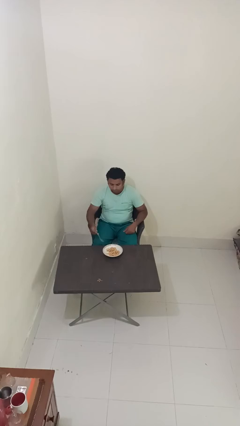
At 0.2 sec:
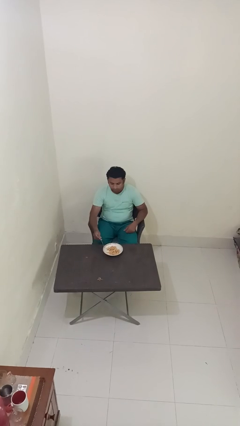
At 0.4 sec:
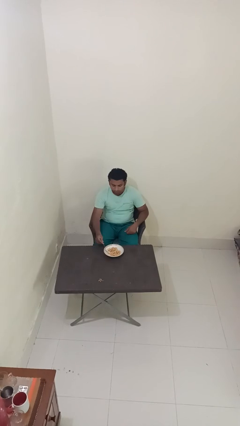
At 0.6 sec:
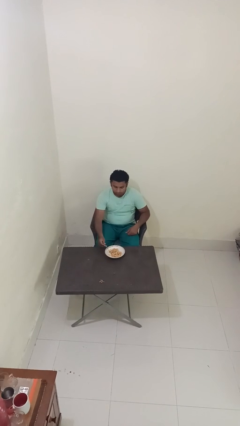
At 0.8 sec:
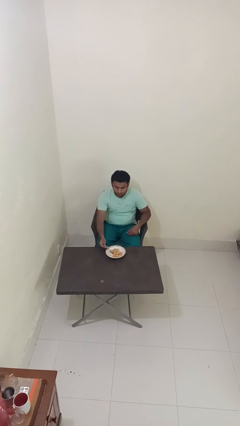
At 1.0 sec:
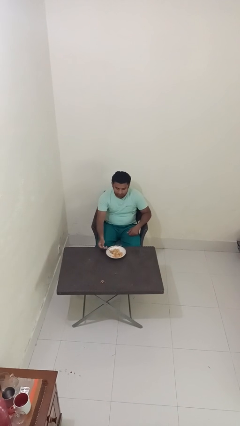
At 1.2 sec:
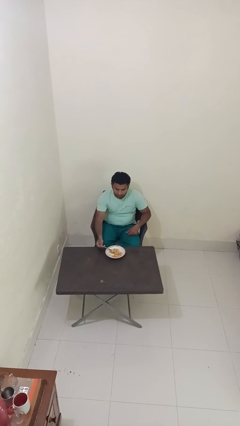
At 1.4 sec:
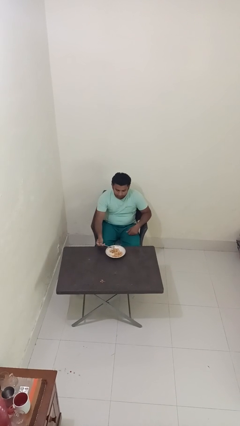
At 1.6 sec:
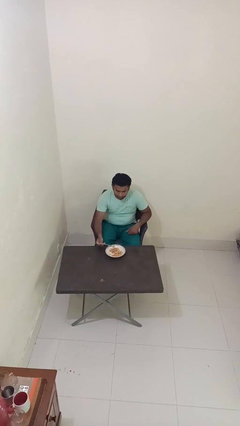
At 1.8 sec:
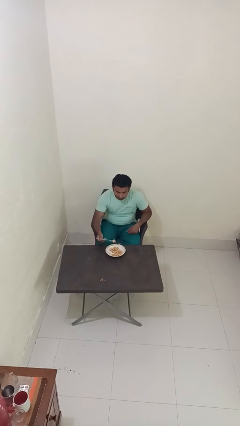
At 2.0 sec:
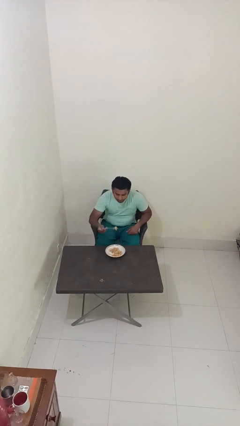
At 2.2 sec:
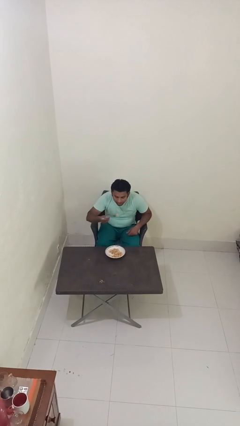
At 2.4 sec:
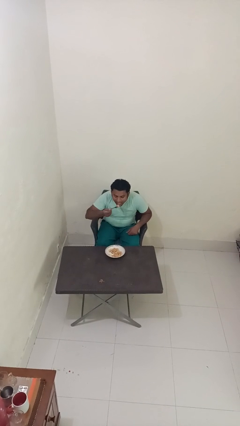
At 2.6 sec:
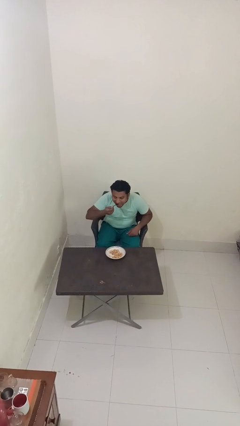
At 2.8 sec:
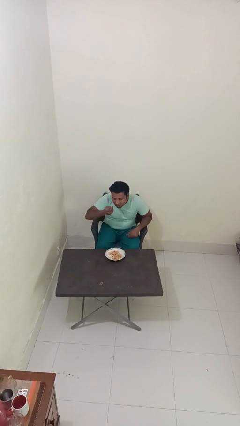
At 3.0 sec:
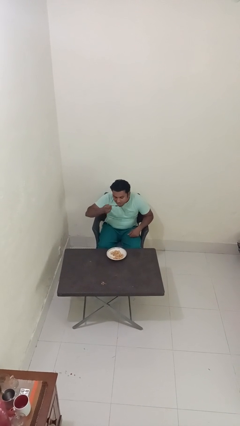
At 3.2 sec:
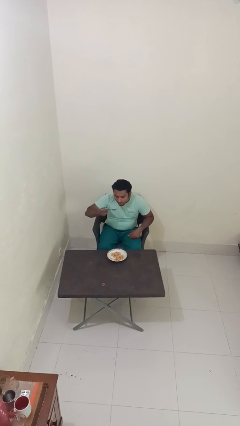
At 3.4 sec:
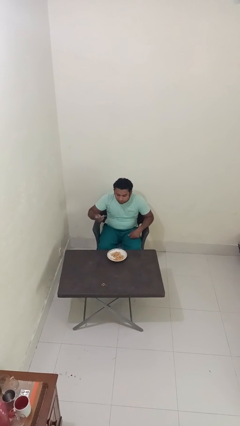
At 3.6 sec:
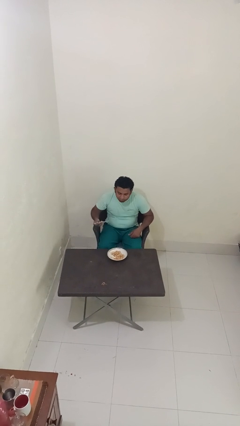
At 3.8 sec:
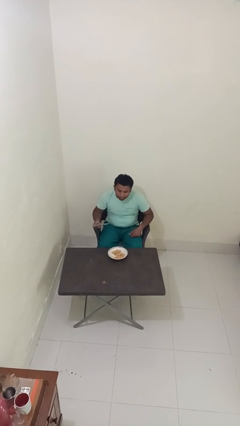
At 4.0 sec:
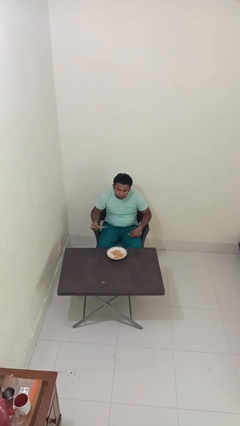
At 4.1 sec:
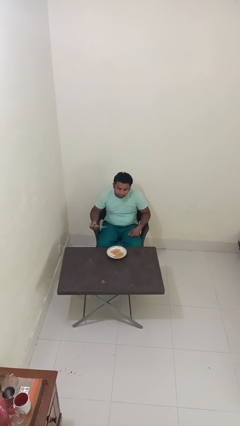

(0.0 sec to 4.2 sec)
person eats with utensil

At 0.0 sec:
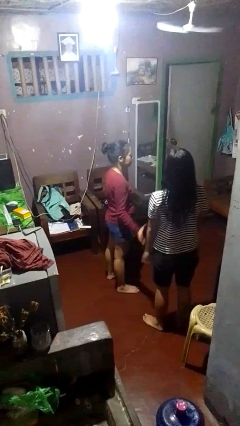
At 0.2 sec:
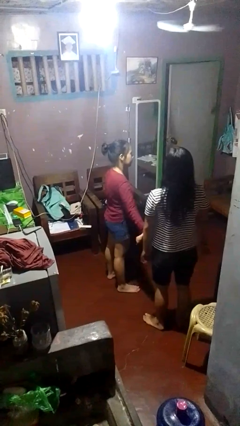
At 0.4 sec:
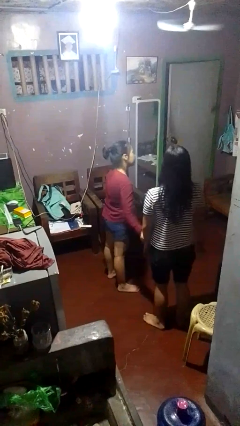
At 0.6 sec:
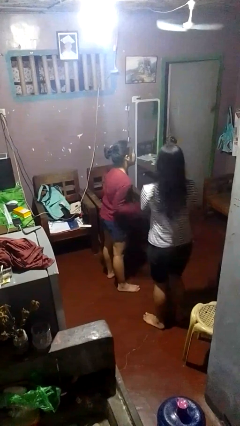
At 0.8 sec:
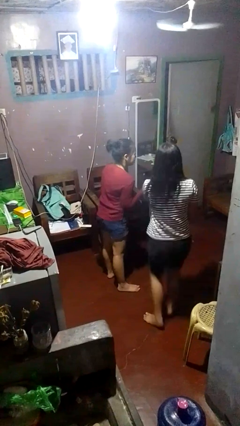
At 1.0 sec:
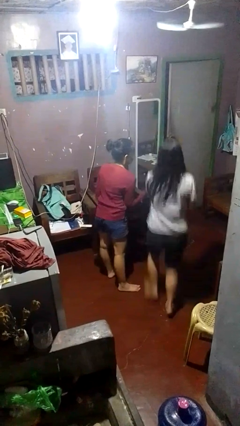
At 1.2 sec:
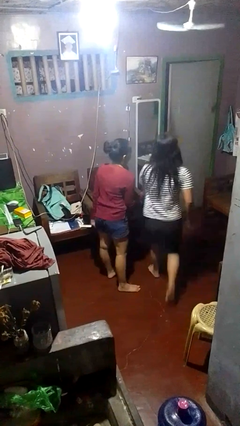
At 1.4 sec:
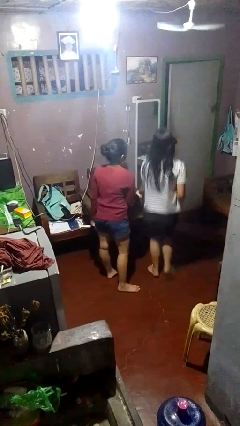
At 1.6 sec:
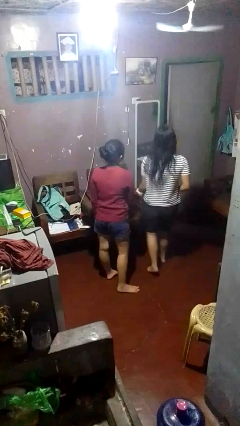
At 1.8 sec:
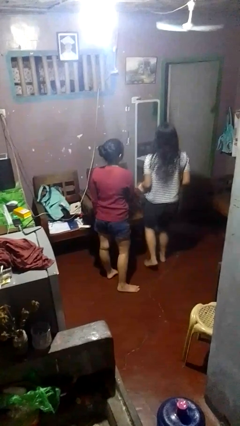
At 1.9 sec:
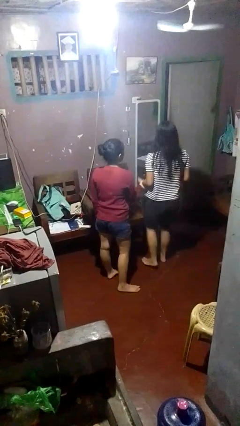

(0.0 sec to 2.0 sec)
person grabs person by forearm

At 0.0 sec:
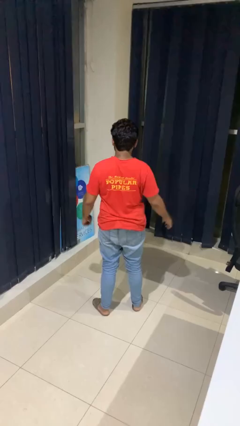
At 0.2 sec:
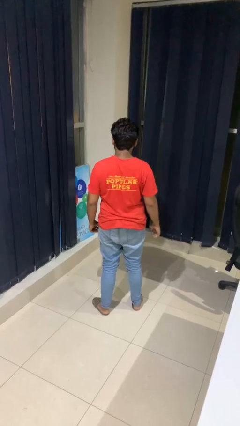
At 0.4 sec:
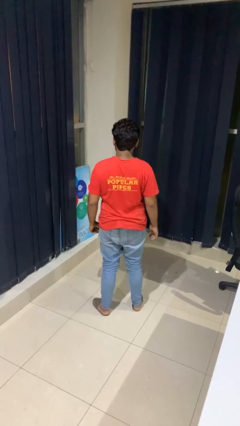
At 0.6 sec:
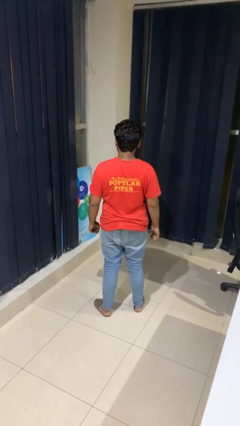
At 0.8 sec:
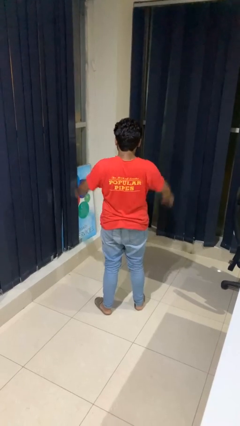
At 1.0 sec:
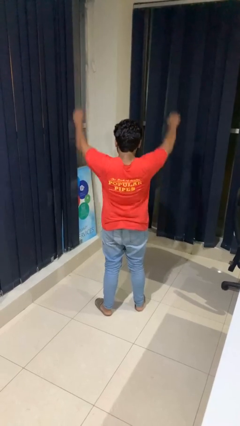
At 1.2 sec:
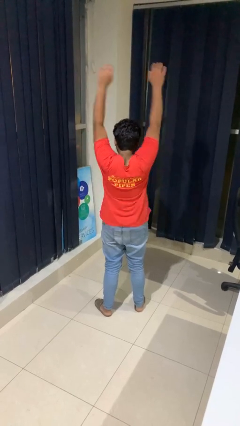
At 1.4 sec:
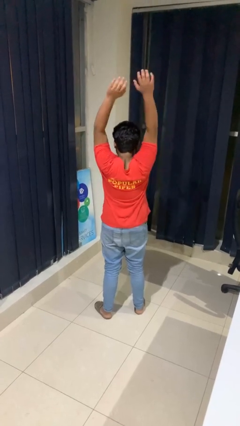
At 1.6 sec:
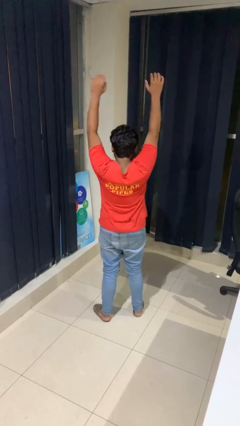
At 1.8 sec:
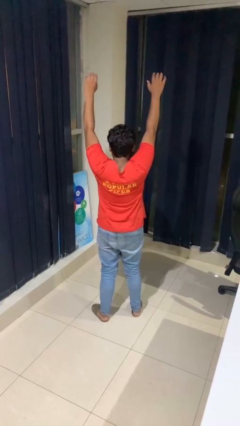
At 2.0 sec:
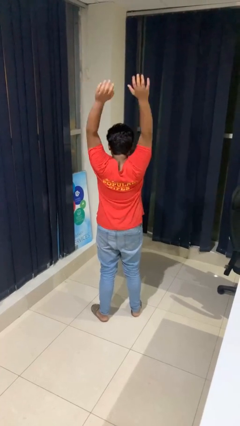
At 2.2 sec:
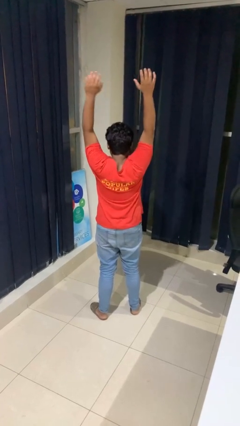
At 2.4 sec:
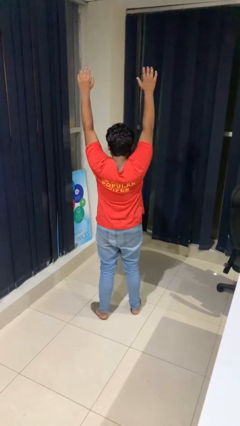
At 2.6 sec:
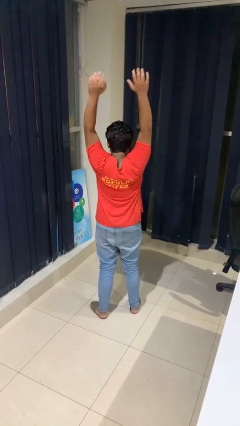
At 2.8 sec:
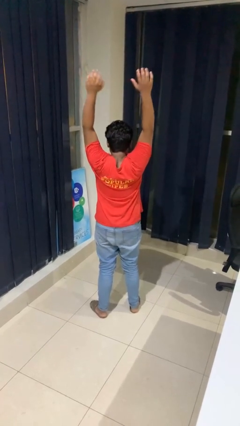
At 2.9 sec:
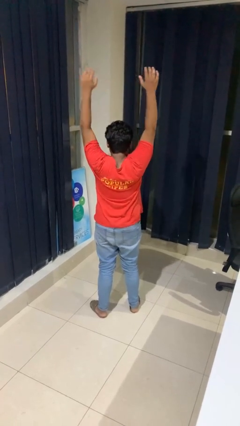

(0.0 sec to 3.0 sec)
person stretches arms over head

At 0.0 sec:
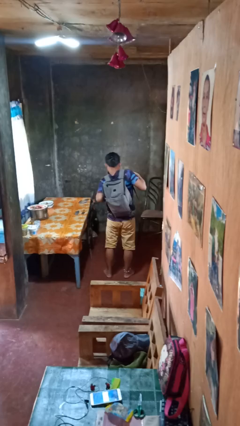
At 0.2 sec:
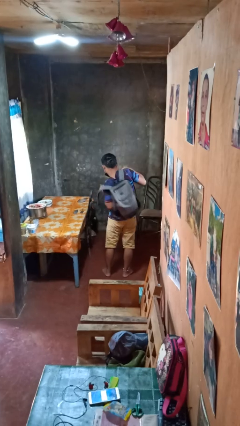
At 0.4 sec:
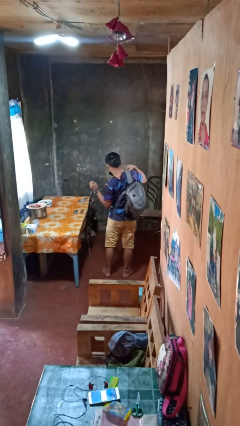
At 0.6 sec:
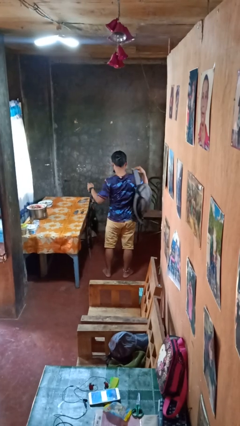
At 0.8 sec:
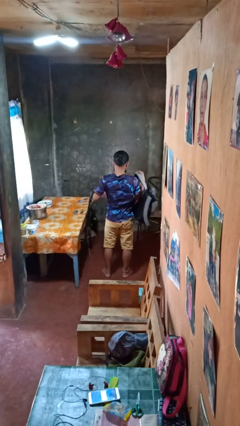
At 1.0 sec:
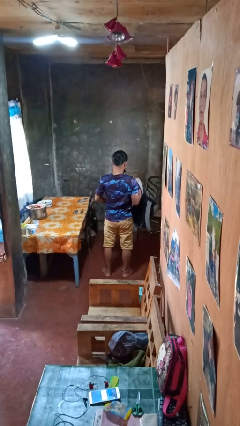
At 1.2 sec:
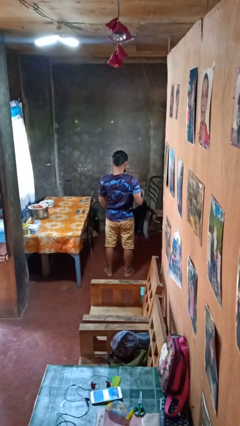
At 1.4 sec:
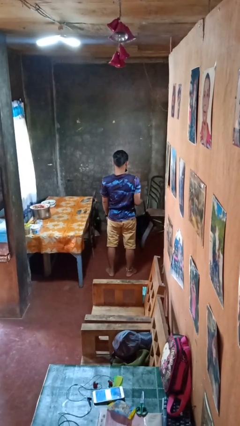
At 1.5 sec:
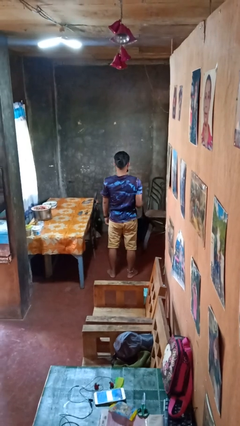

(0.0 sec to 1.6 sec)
person takes off backpack

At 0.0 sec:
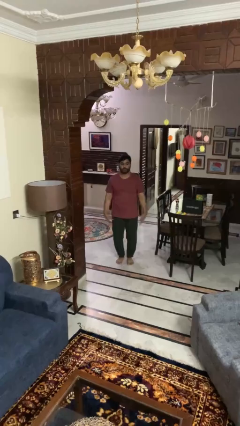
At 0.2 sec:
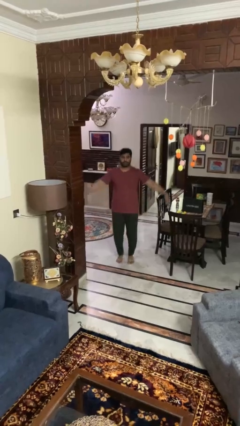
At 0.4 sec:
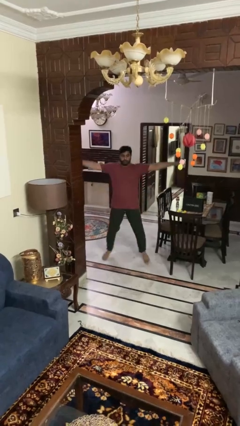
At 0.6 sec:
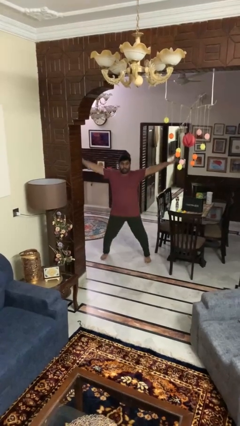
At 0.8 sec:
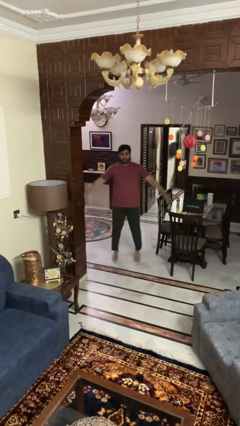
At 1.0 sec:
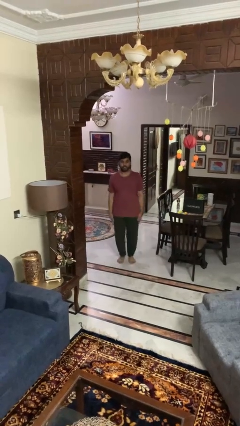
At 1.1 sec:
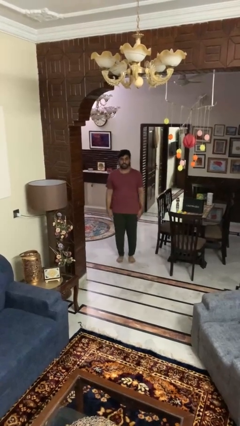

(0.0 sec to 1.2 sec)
person exercises with jumping jacks

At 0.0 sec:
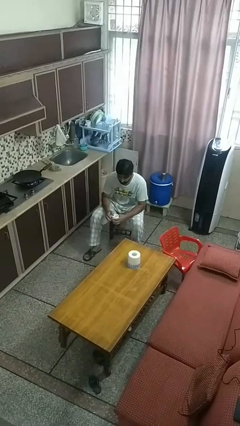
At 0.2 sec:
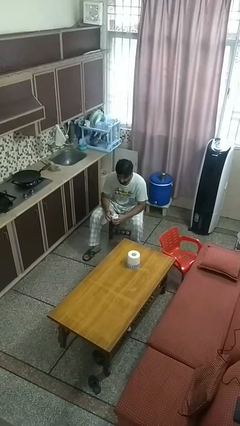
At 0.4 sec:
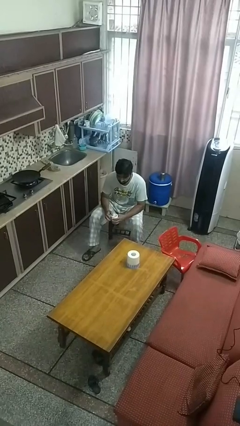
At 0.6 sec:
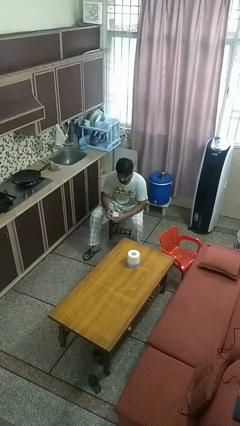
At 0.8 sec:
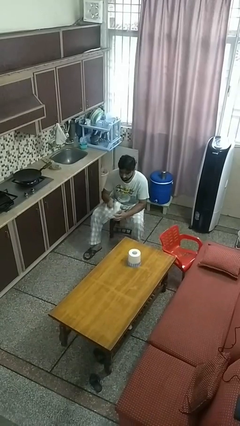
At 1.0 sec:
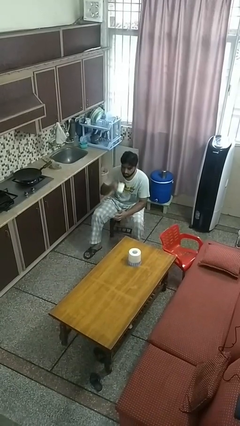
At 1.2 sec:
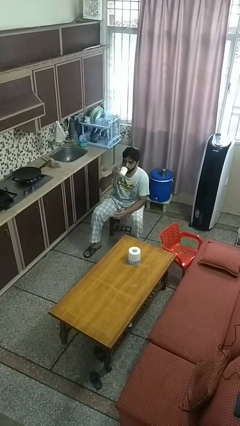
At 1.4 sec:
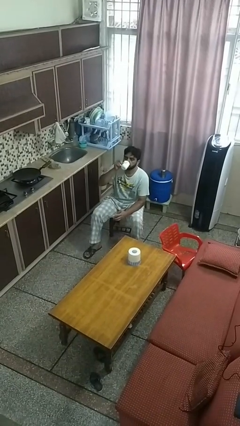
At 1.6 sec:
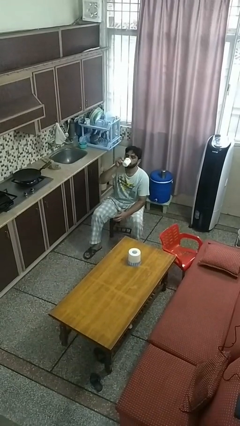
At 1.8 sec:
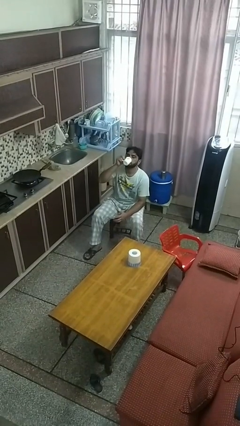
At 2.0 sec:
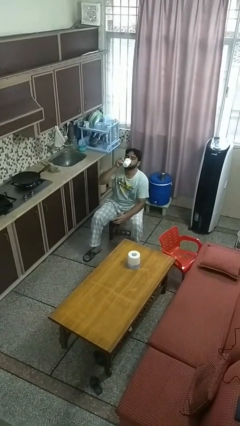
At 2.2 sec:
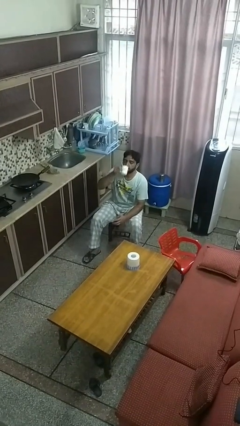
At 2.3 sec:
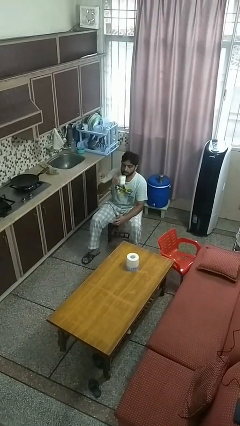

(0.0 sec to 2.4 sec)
person drinks from mug

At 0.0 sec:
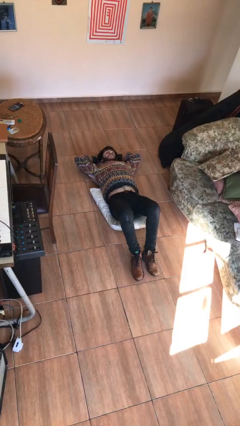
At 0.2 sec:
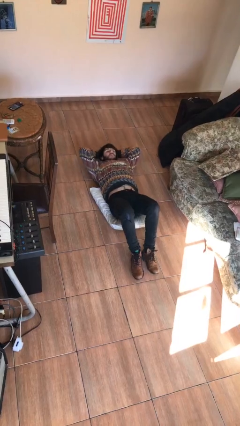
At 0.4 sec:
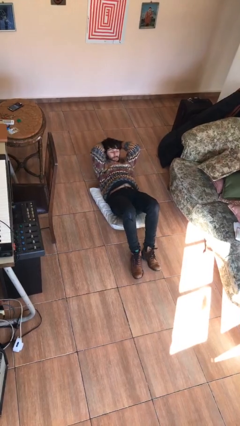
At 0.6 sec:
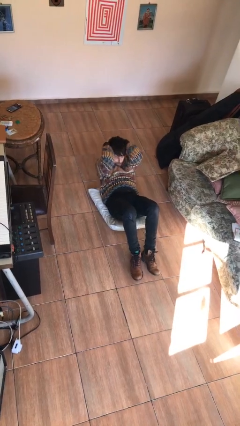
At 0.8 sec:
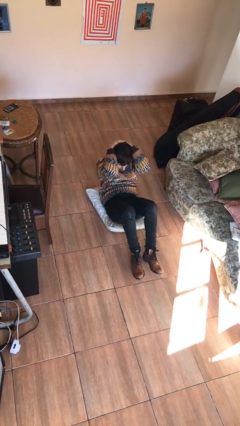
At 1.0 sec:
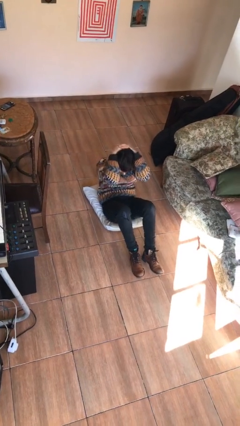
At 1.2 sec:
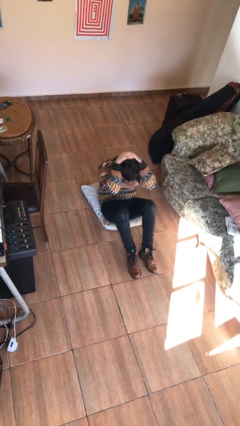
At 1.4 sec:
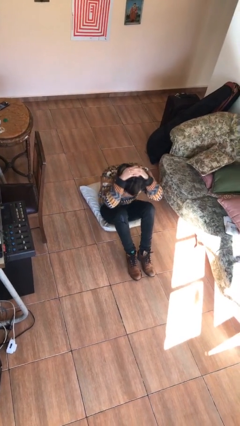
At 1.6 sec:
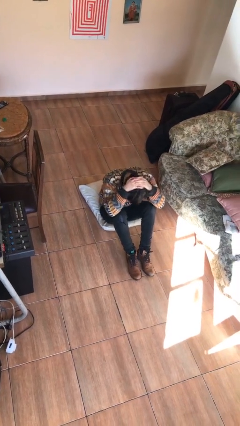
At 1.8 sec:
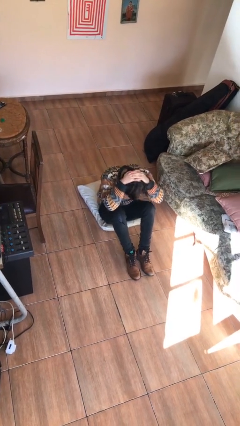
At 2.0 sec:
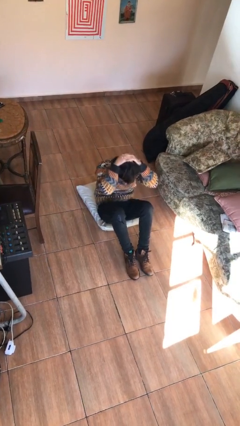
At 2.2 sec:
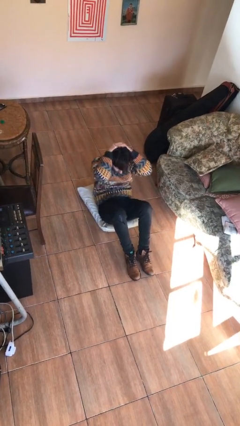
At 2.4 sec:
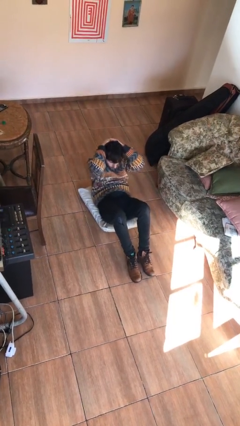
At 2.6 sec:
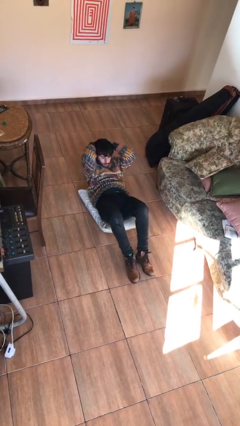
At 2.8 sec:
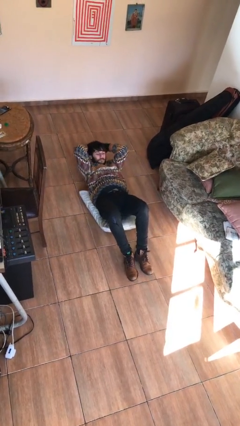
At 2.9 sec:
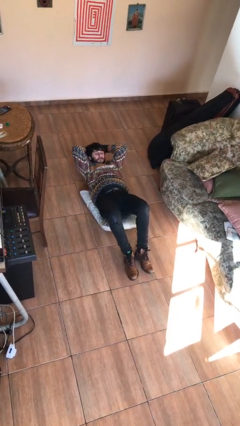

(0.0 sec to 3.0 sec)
person exercises with situp
